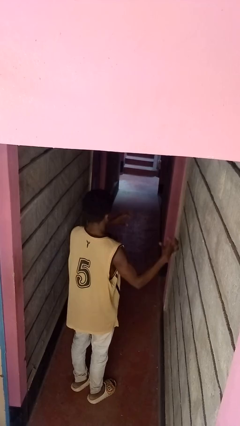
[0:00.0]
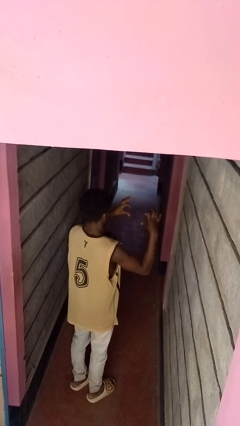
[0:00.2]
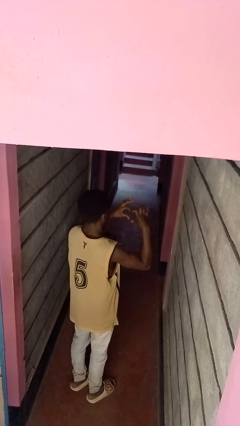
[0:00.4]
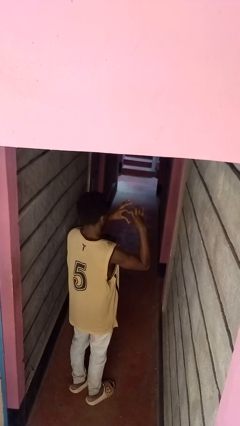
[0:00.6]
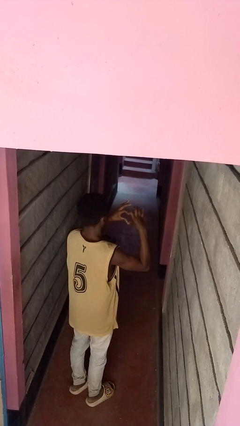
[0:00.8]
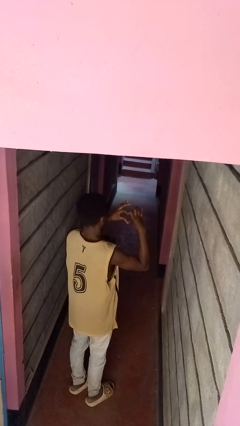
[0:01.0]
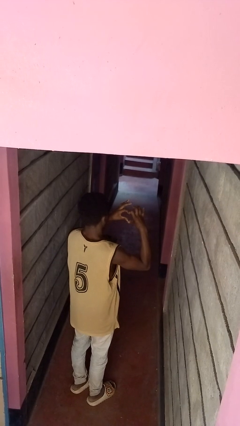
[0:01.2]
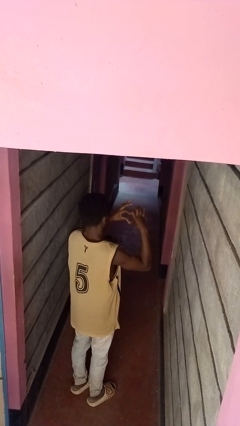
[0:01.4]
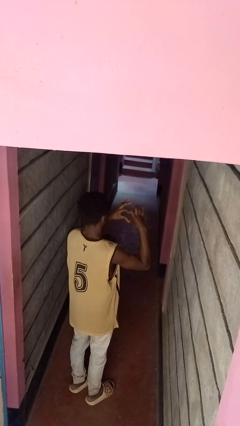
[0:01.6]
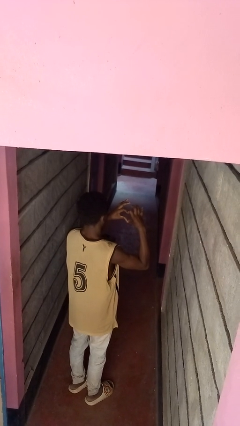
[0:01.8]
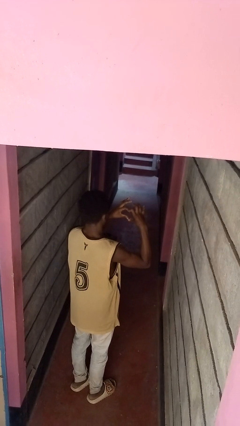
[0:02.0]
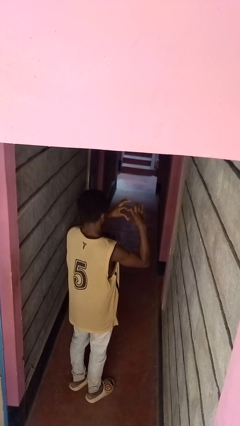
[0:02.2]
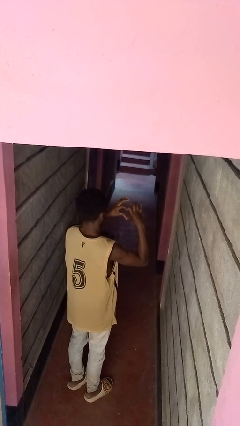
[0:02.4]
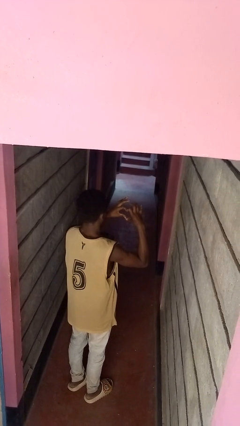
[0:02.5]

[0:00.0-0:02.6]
person gestures heart

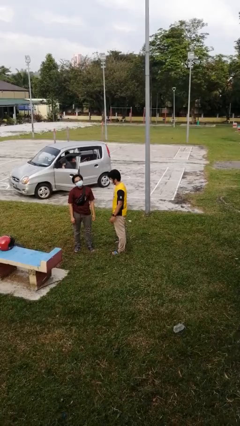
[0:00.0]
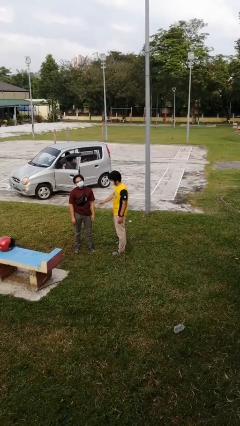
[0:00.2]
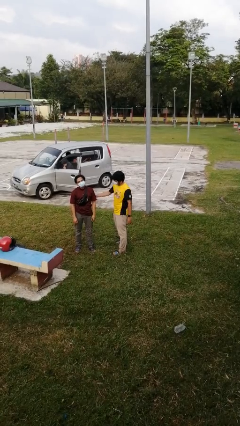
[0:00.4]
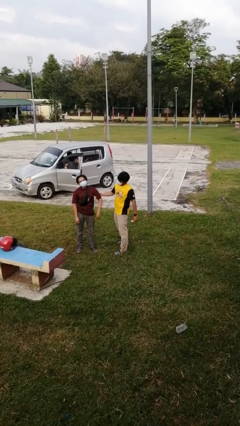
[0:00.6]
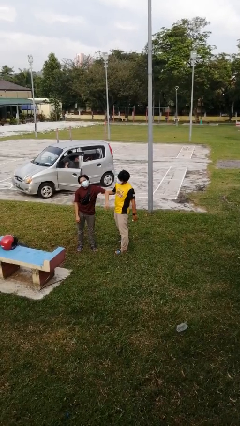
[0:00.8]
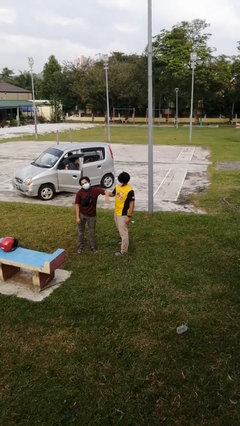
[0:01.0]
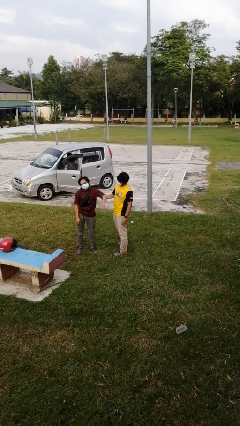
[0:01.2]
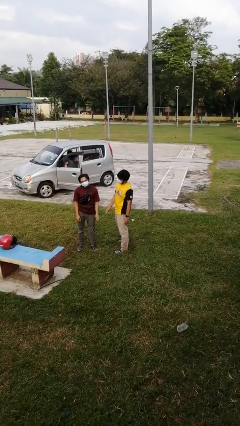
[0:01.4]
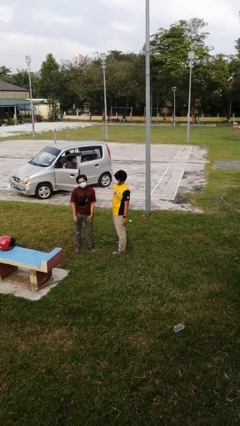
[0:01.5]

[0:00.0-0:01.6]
person grabs person by bicep

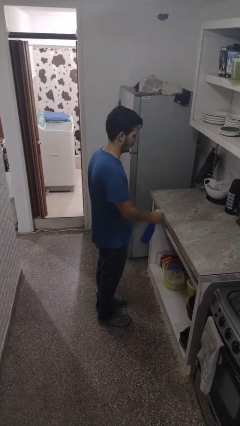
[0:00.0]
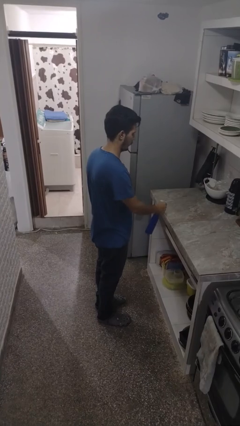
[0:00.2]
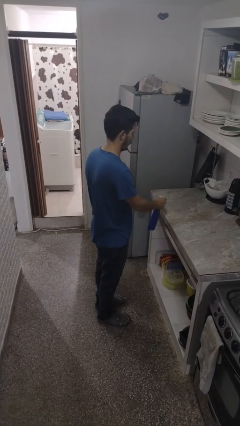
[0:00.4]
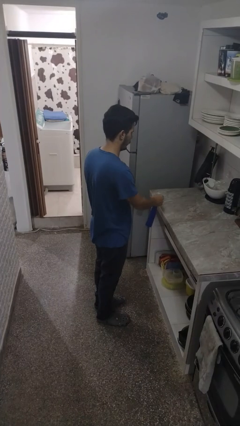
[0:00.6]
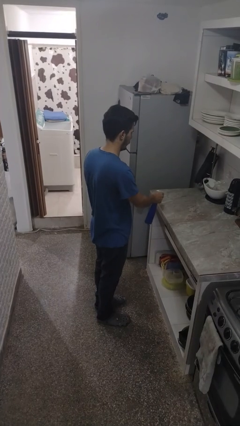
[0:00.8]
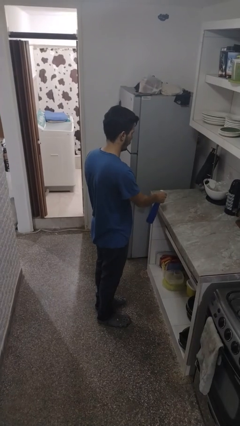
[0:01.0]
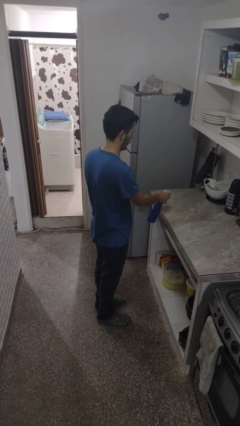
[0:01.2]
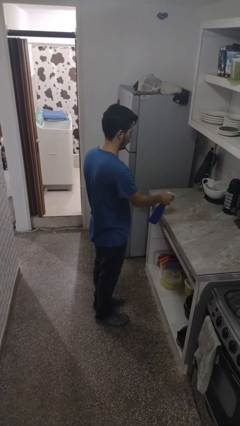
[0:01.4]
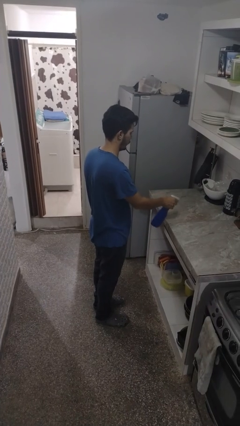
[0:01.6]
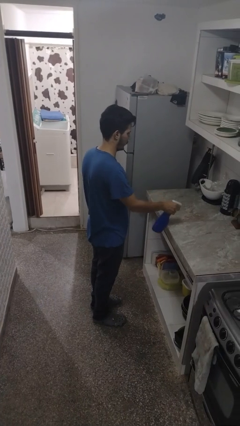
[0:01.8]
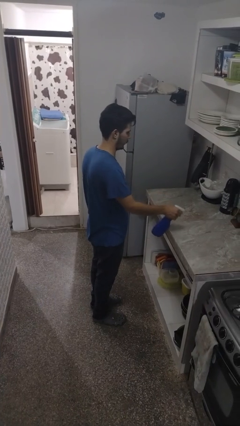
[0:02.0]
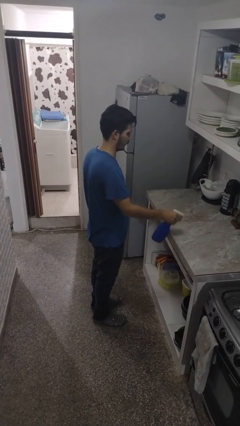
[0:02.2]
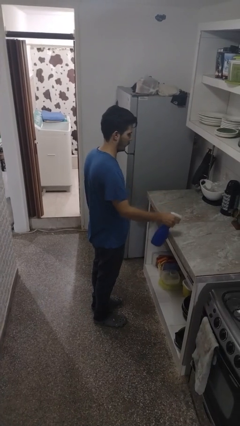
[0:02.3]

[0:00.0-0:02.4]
person sprays from bottle

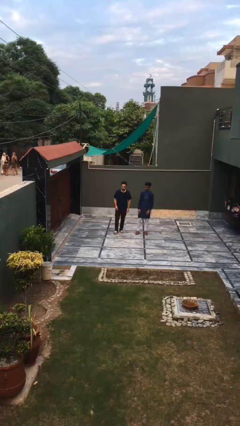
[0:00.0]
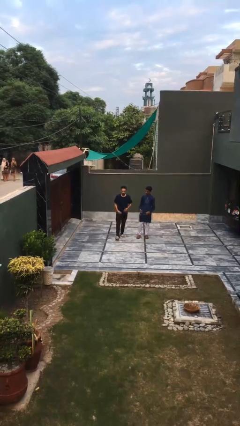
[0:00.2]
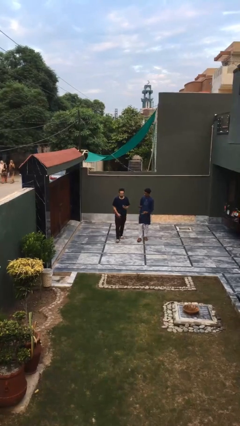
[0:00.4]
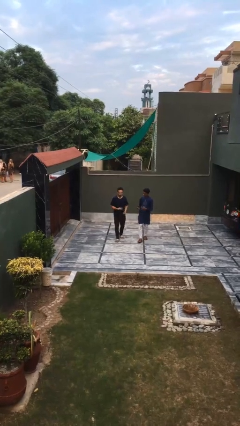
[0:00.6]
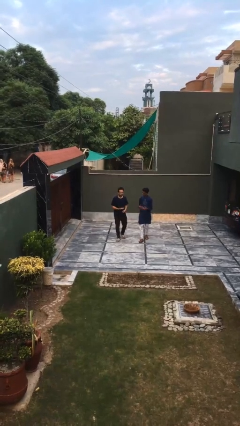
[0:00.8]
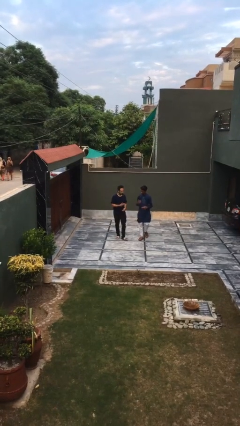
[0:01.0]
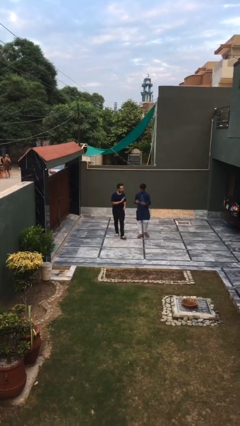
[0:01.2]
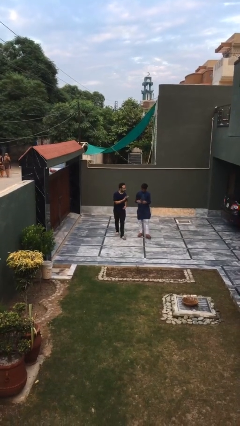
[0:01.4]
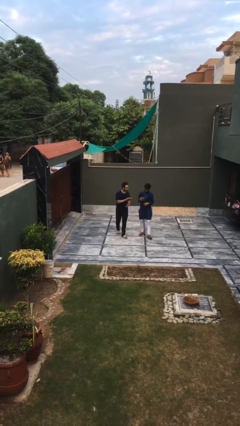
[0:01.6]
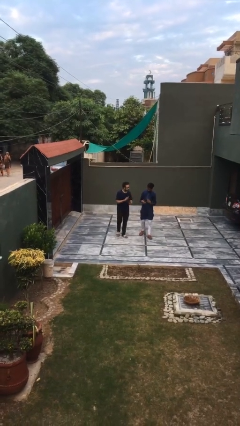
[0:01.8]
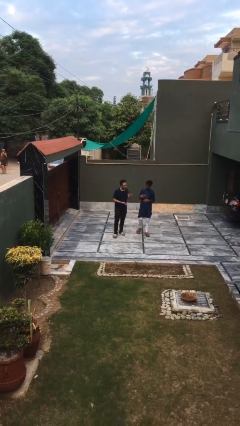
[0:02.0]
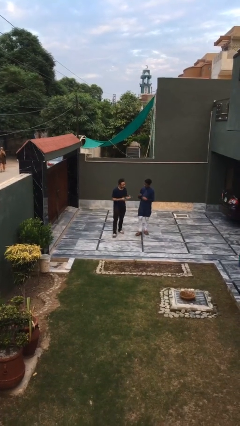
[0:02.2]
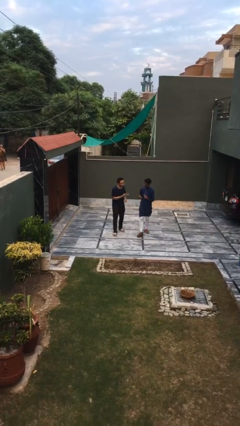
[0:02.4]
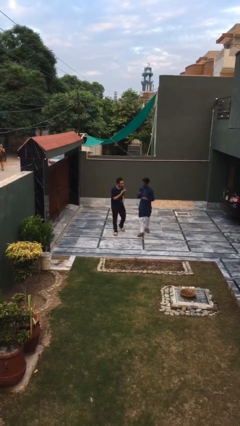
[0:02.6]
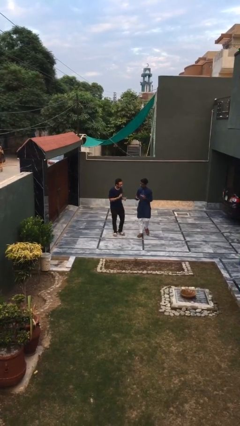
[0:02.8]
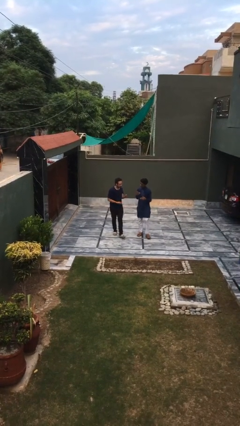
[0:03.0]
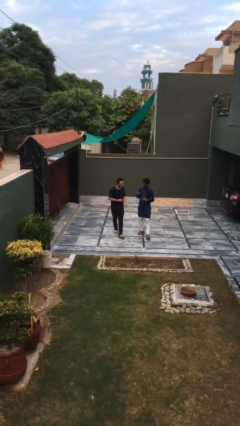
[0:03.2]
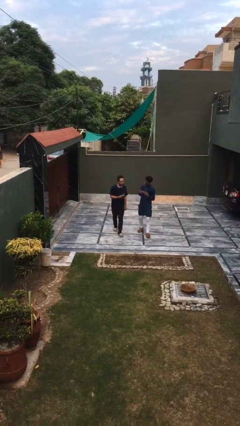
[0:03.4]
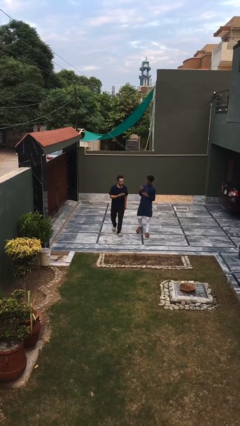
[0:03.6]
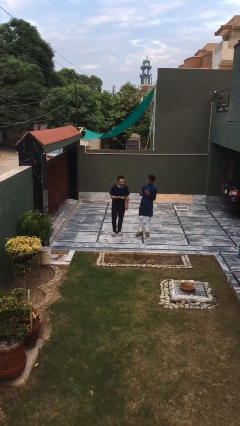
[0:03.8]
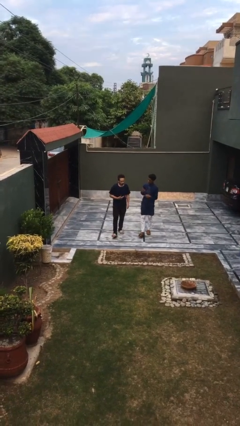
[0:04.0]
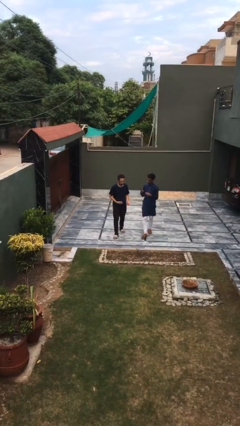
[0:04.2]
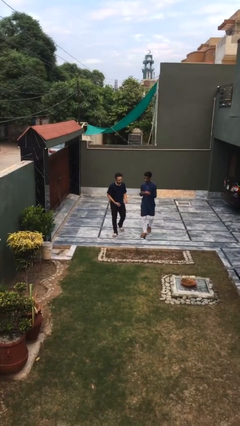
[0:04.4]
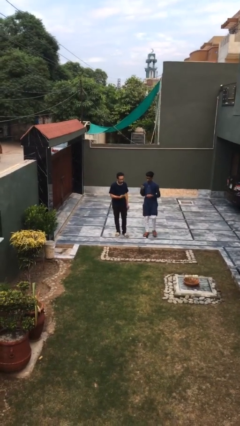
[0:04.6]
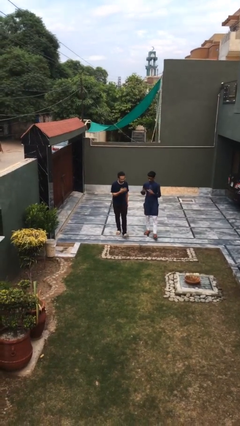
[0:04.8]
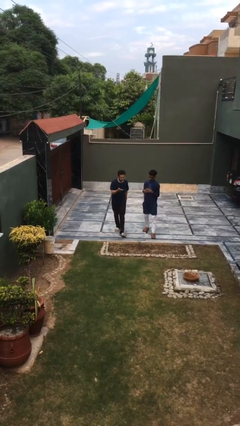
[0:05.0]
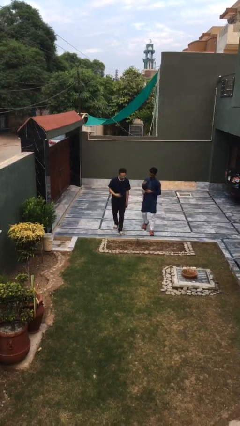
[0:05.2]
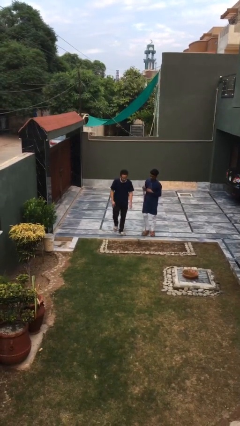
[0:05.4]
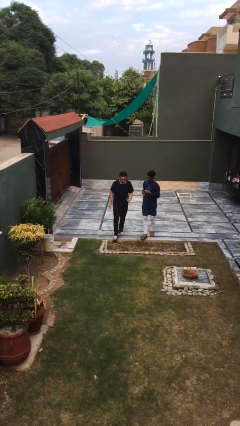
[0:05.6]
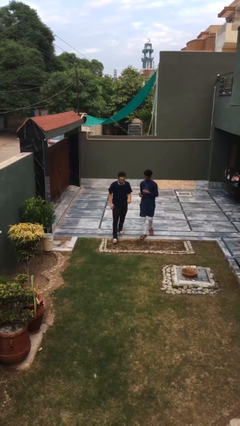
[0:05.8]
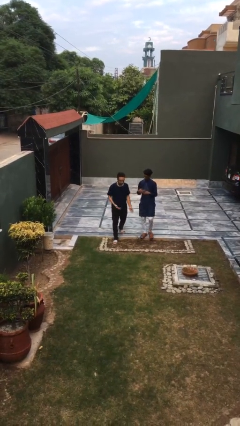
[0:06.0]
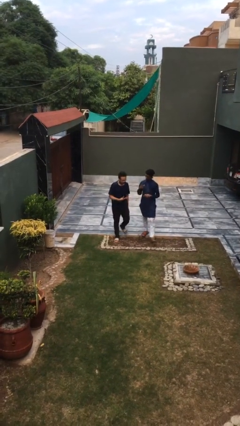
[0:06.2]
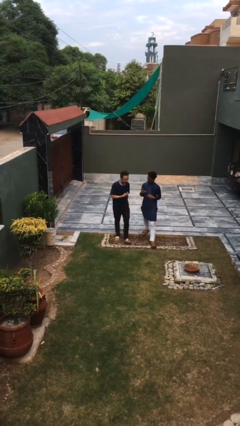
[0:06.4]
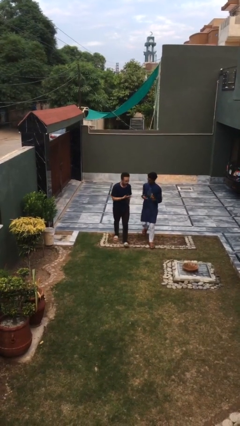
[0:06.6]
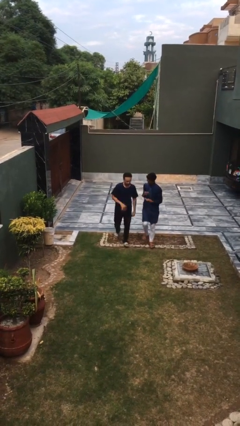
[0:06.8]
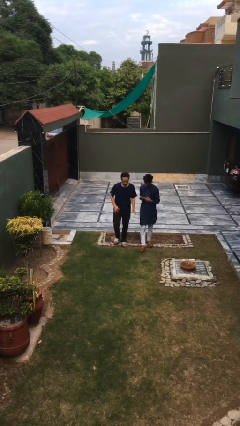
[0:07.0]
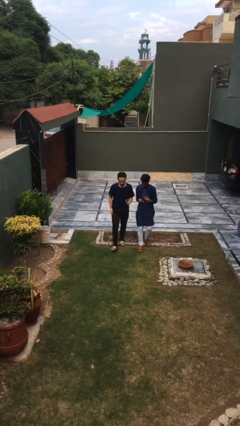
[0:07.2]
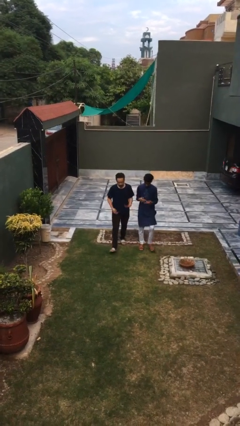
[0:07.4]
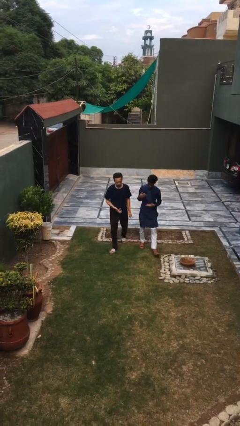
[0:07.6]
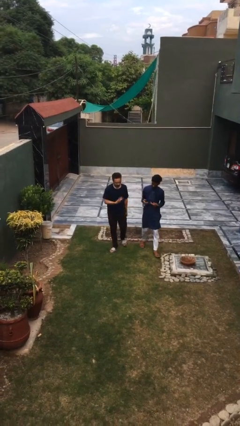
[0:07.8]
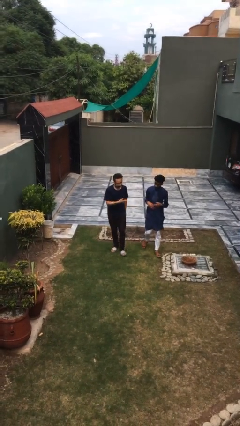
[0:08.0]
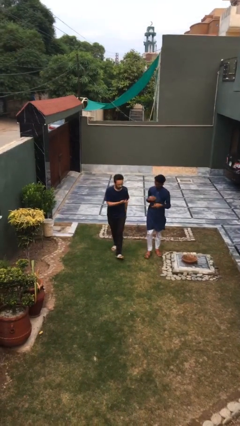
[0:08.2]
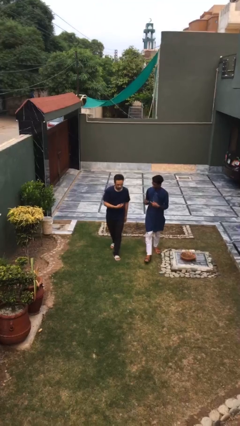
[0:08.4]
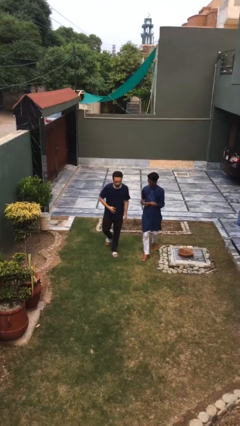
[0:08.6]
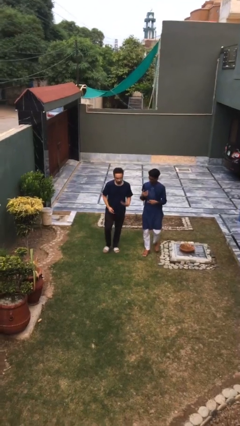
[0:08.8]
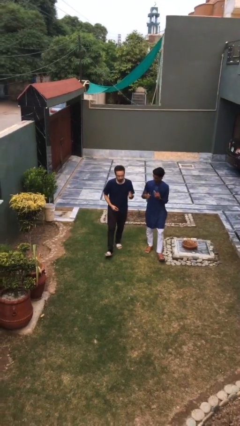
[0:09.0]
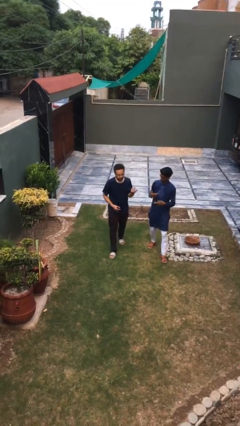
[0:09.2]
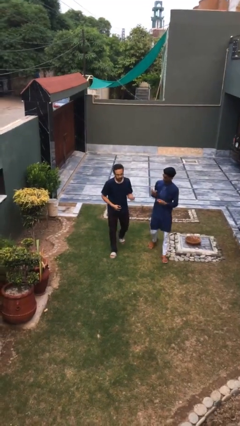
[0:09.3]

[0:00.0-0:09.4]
person talks to person

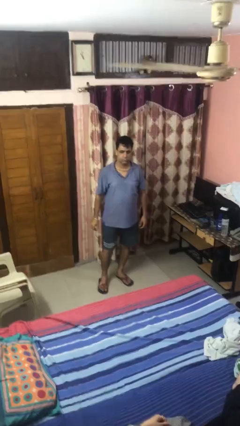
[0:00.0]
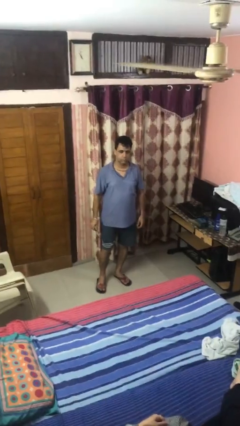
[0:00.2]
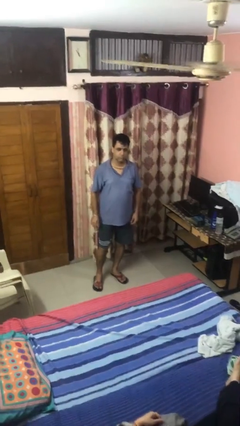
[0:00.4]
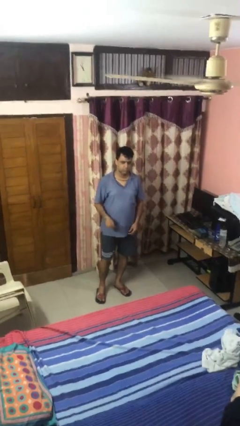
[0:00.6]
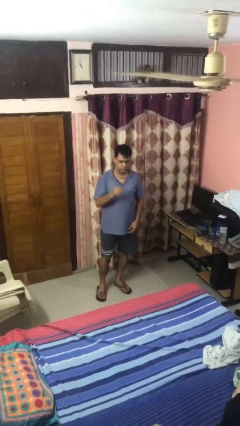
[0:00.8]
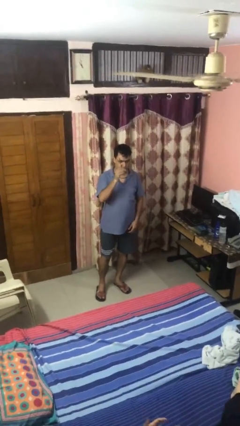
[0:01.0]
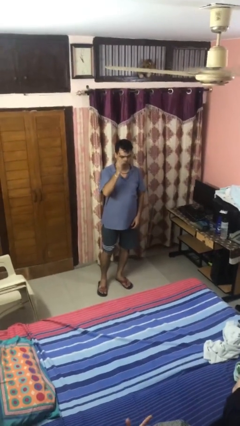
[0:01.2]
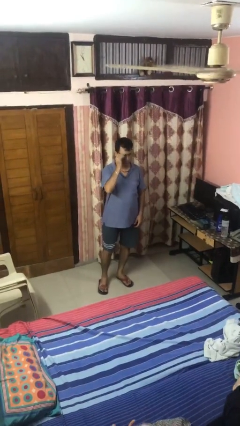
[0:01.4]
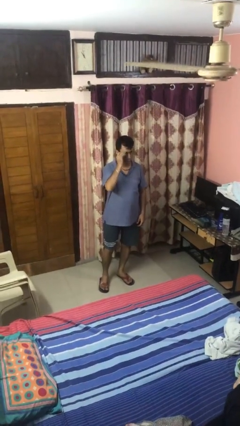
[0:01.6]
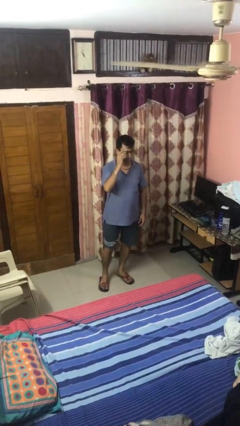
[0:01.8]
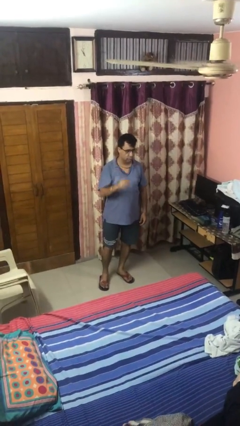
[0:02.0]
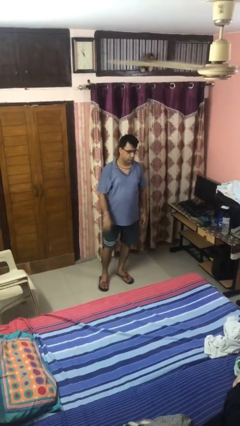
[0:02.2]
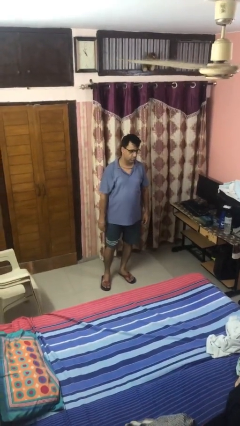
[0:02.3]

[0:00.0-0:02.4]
person puts on glasses
